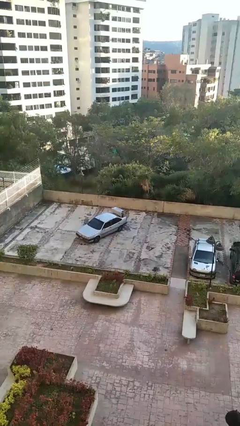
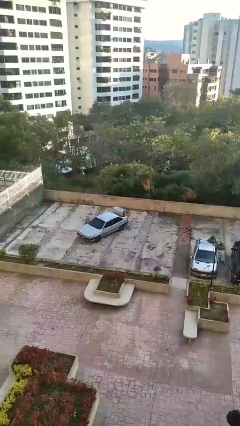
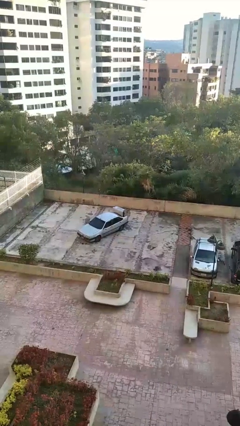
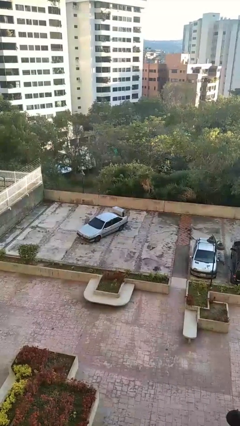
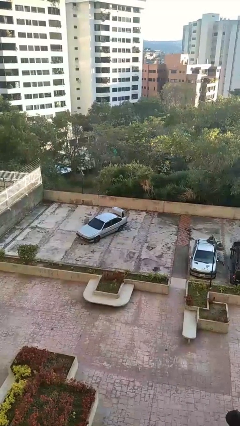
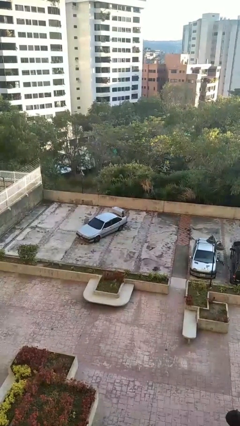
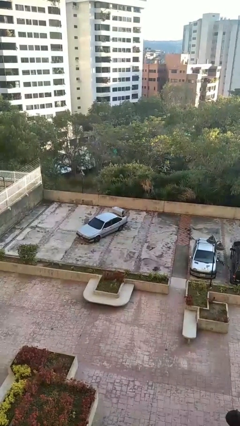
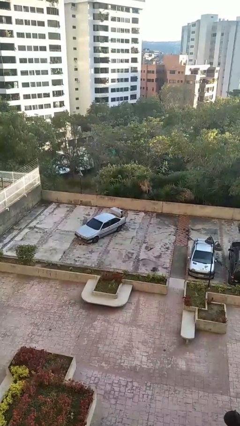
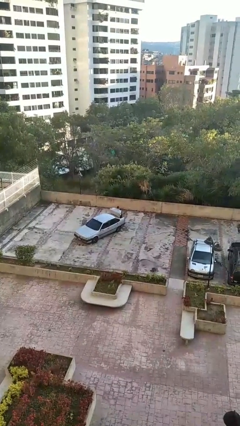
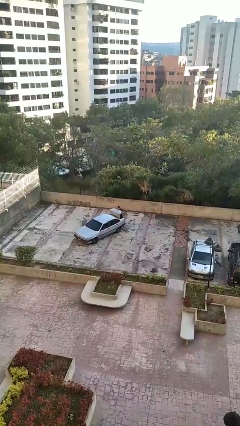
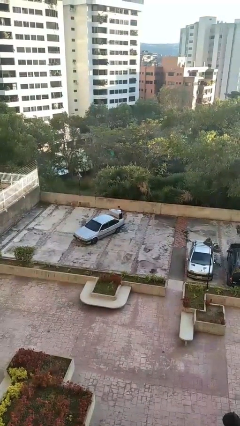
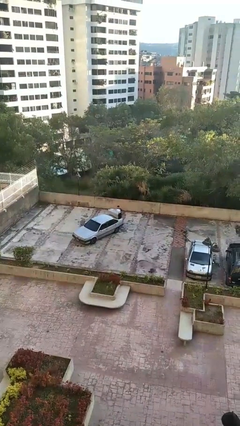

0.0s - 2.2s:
person unloads car

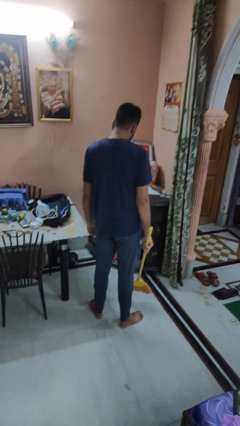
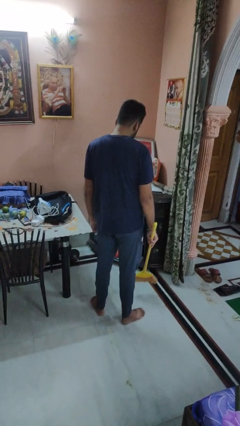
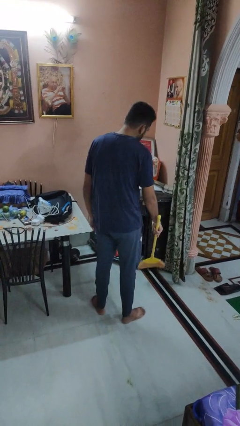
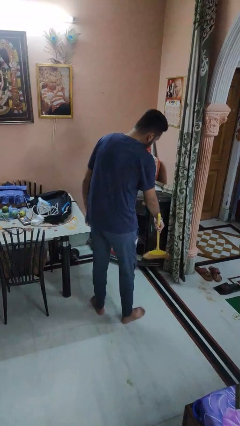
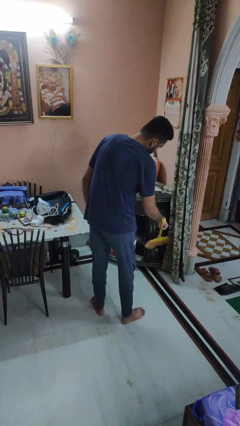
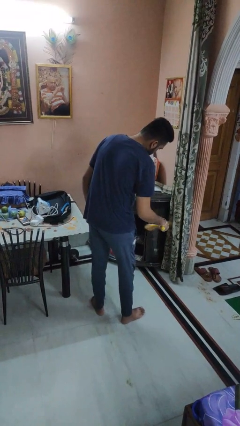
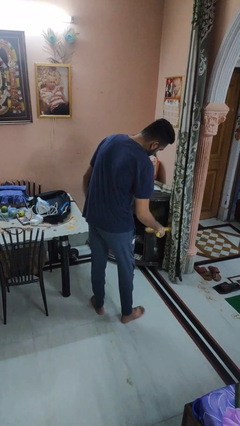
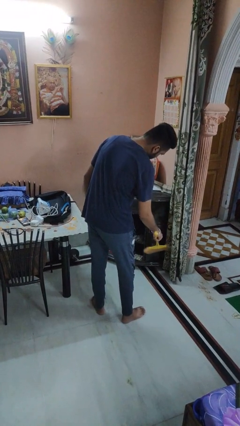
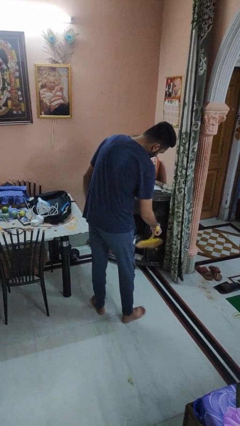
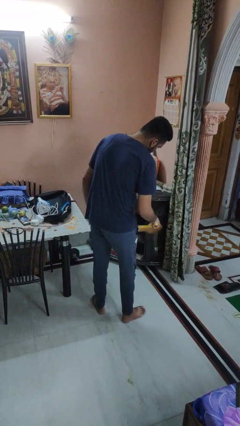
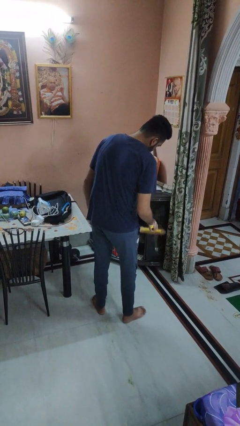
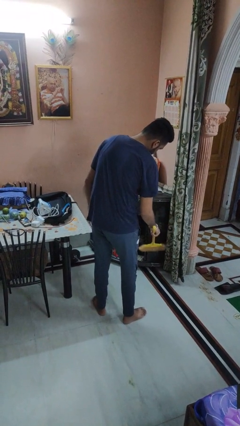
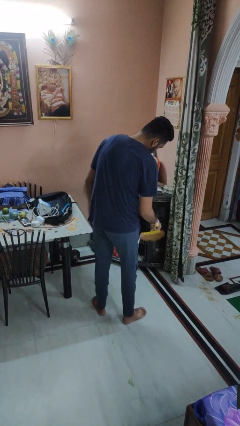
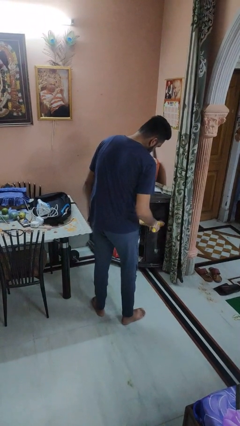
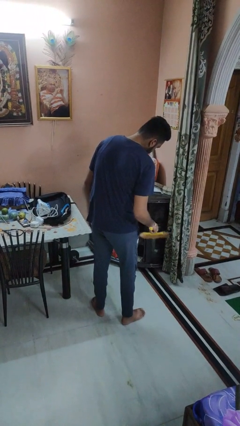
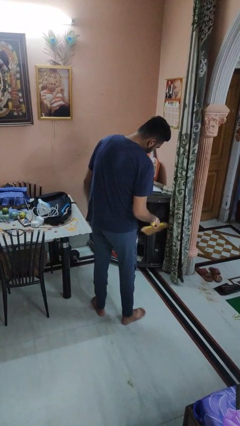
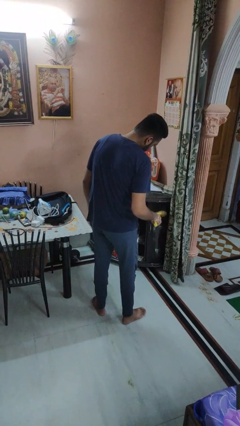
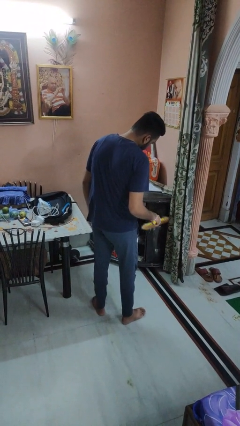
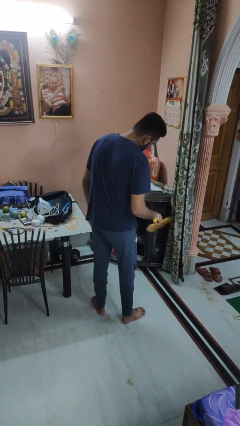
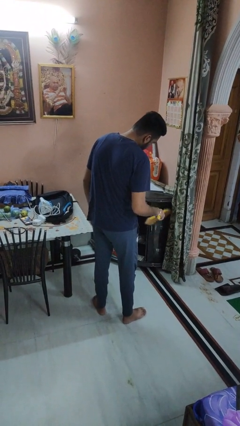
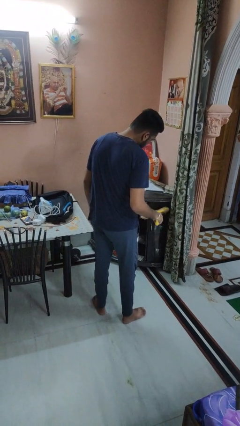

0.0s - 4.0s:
person dusts furniture

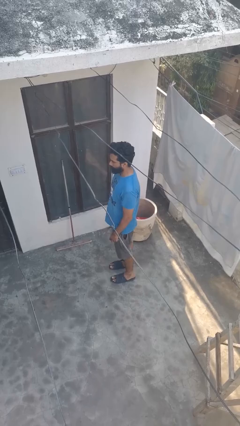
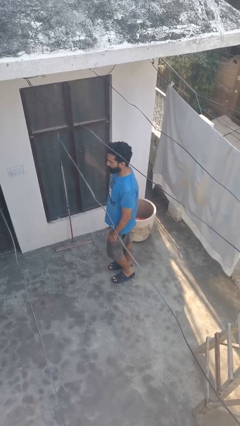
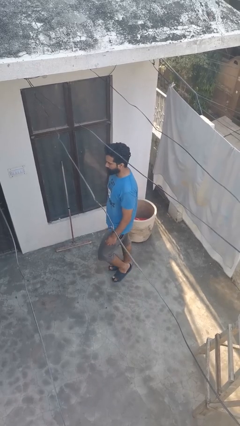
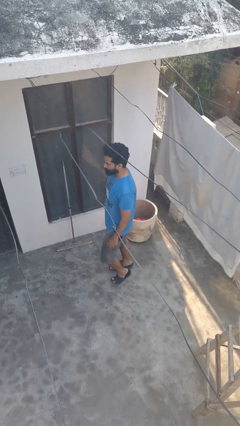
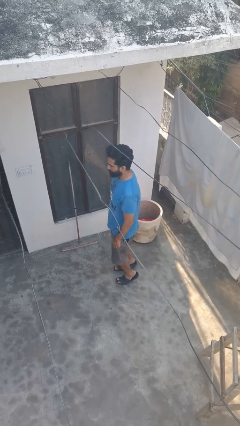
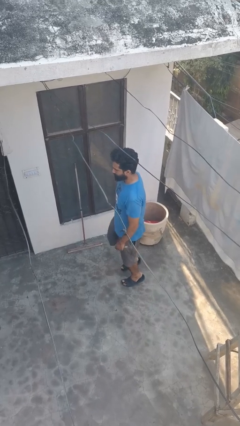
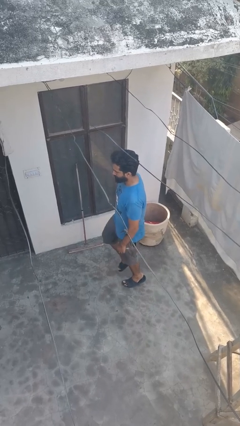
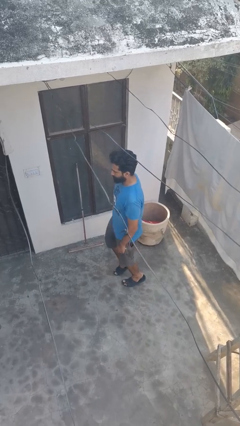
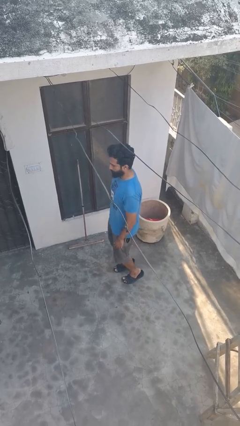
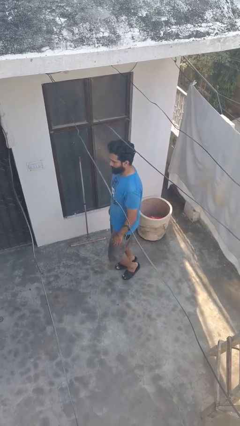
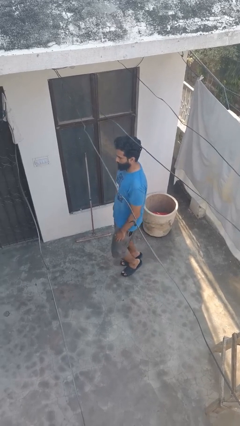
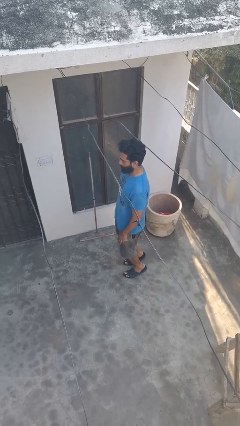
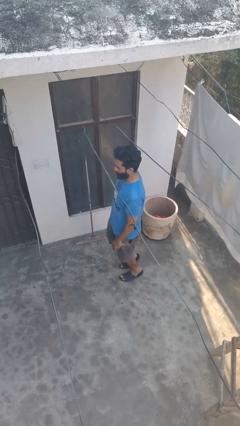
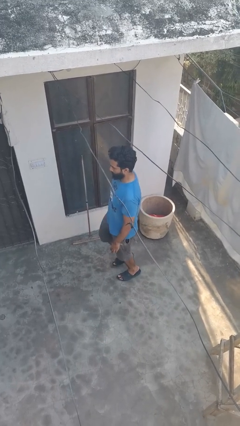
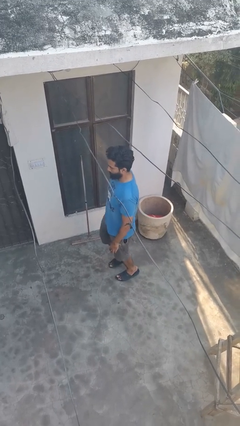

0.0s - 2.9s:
person walks tiptoe

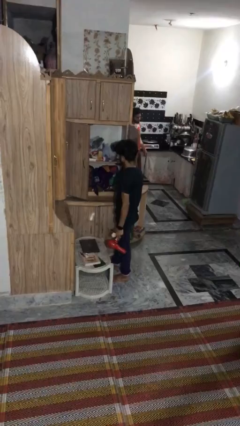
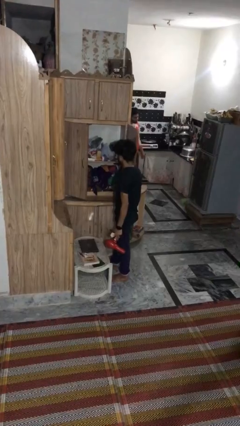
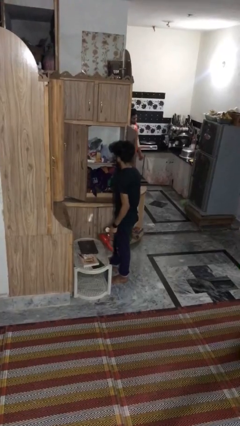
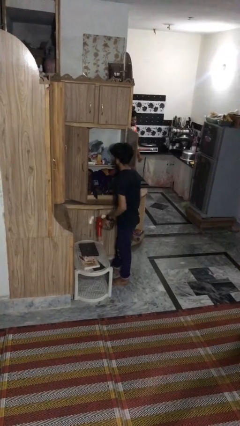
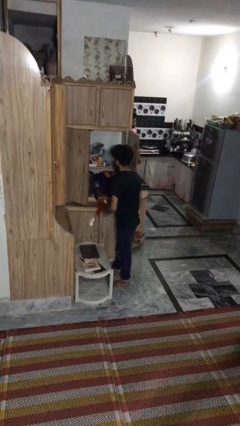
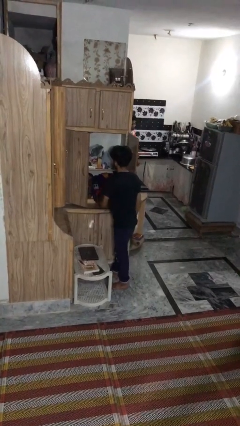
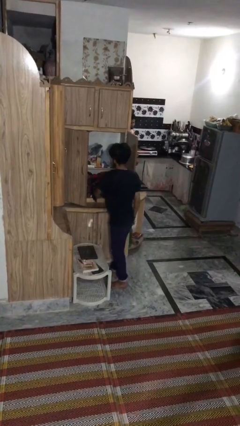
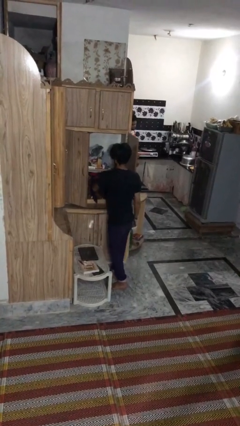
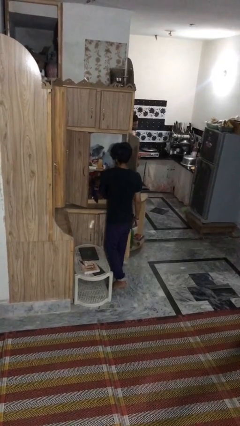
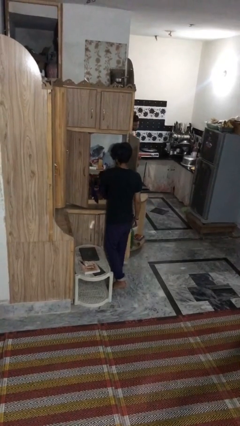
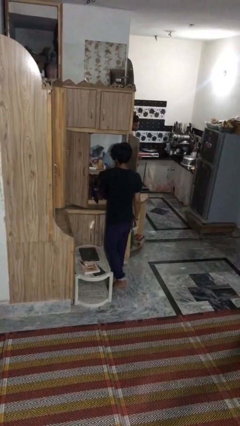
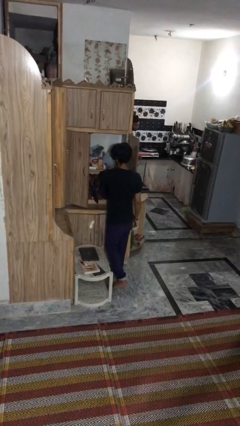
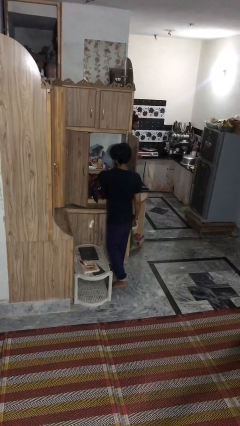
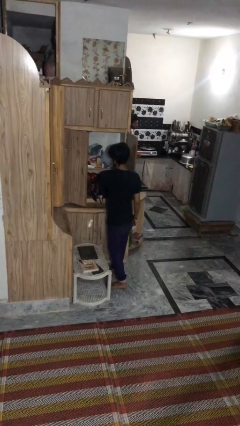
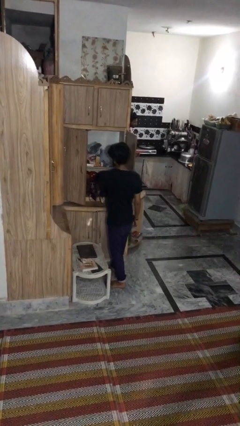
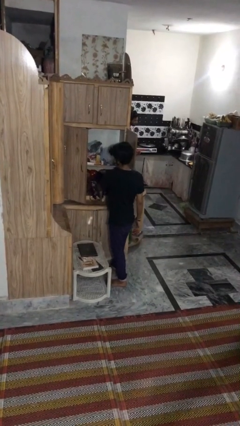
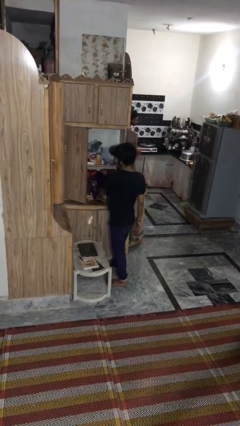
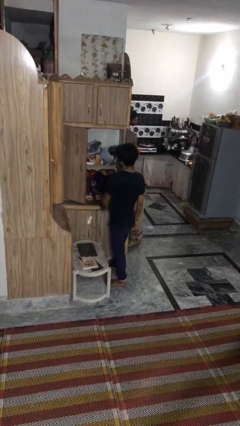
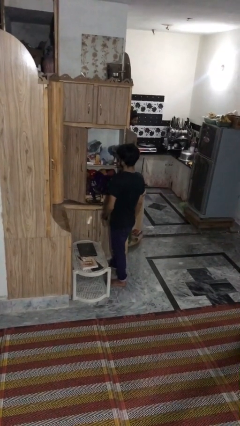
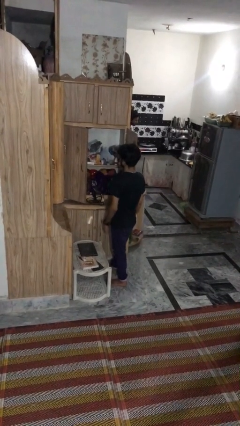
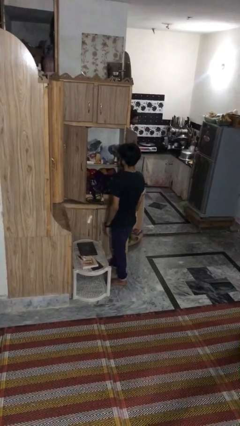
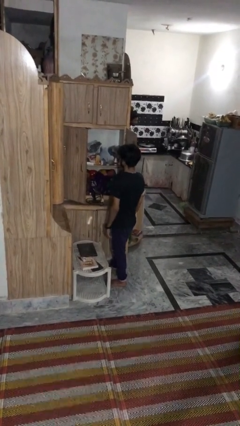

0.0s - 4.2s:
person puts down object into cabinet

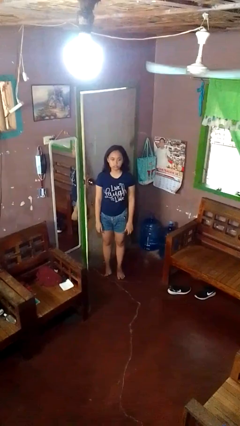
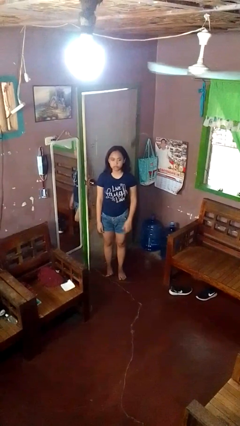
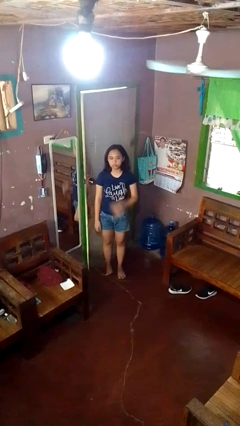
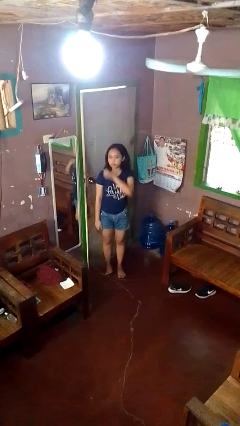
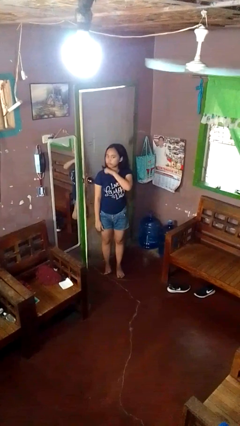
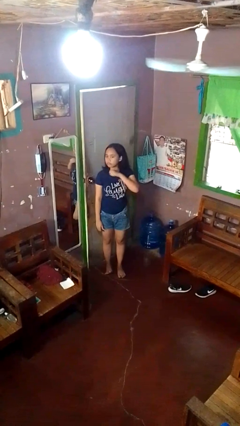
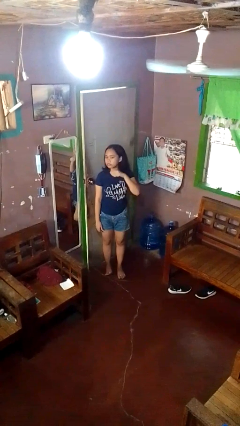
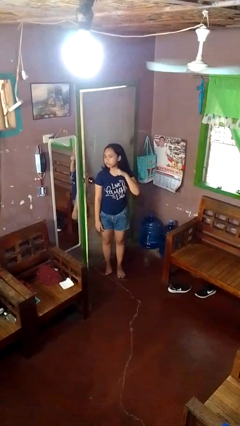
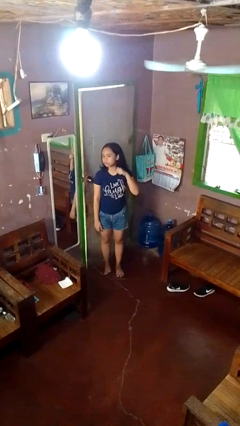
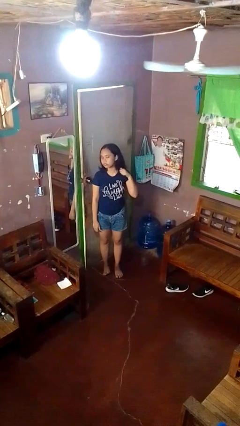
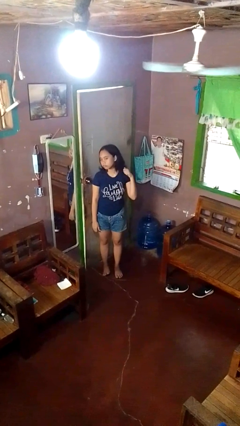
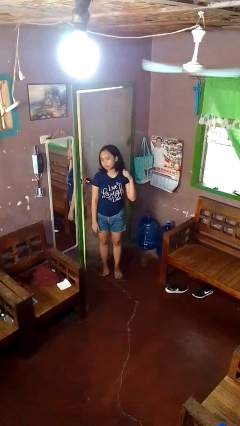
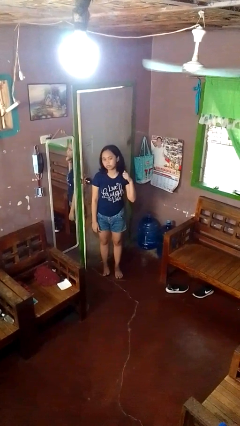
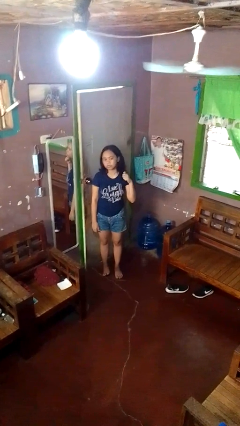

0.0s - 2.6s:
person gestures cut

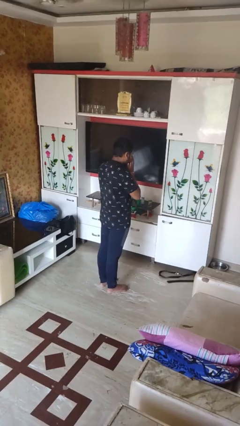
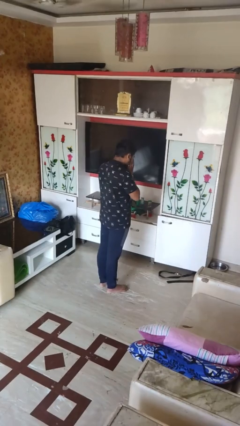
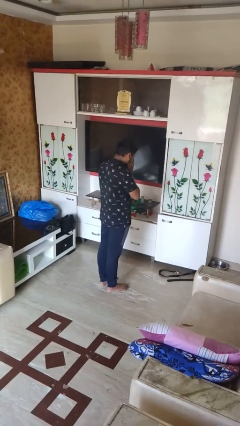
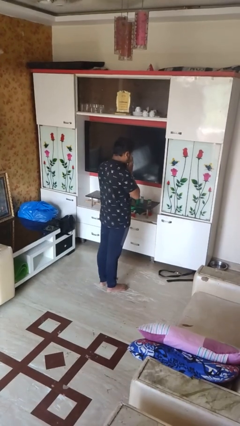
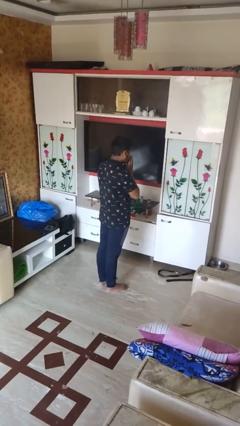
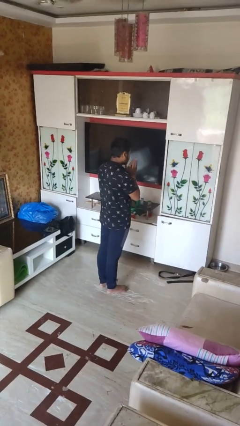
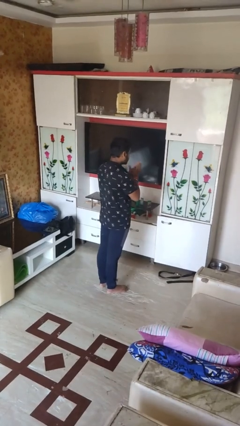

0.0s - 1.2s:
person sneezes into hand

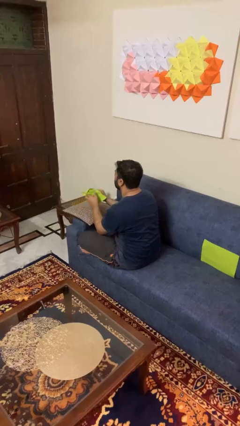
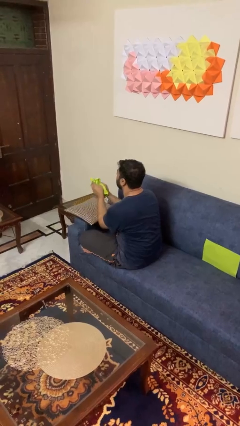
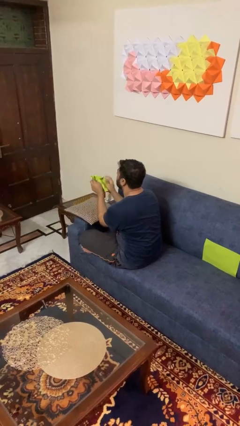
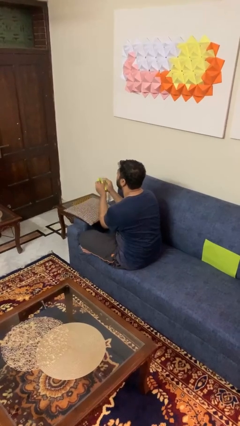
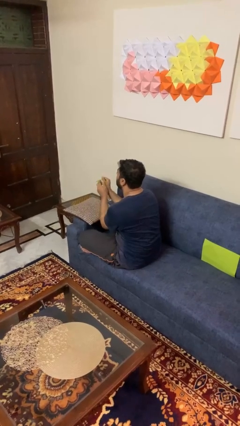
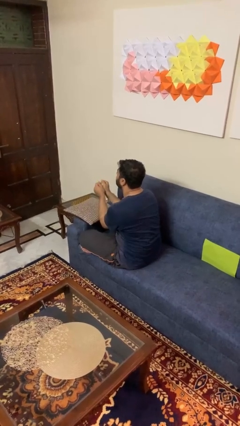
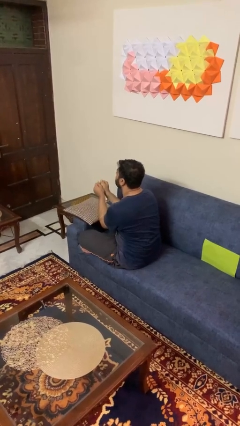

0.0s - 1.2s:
person crumples paper
